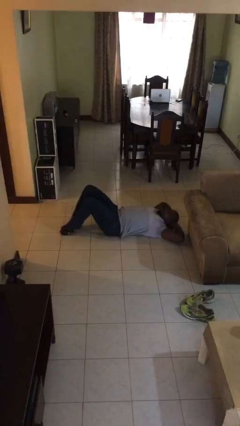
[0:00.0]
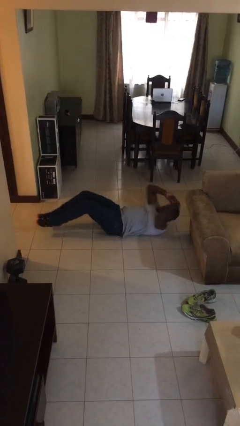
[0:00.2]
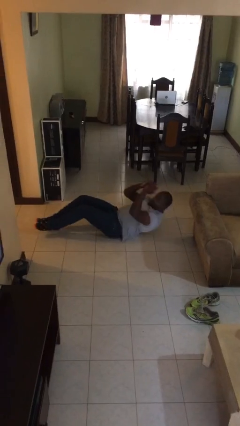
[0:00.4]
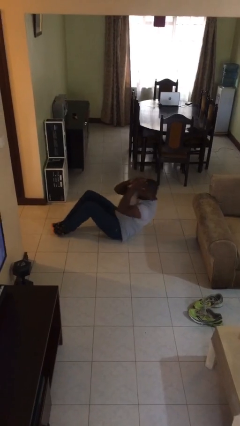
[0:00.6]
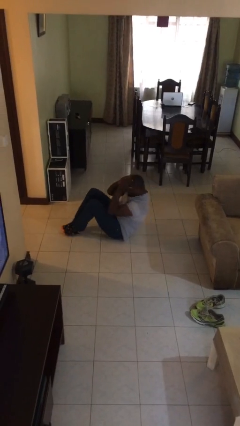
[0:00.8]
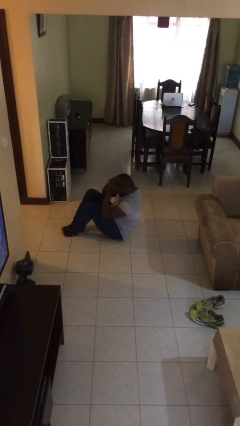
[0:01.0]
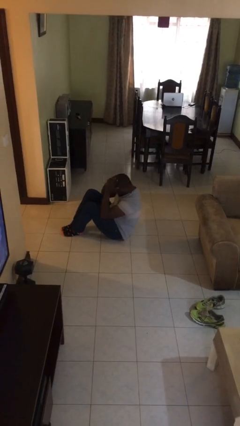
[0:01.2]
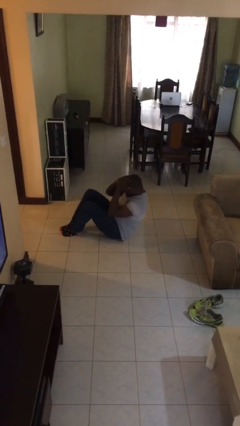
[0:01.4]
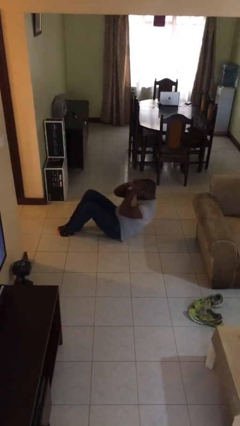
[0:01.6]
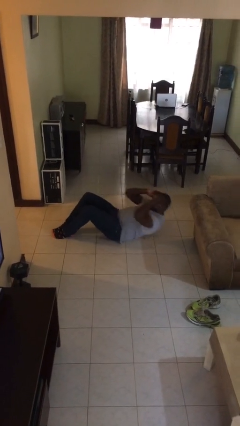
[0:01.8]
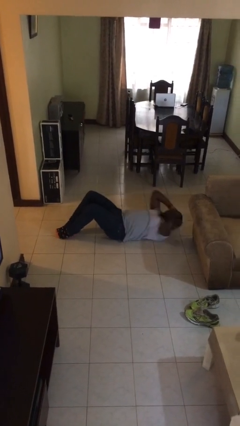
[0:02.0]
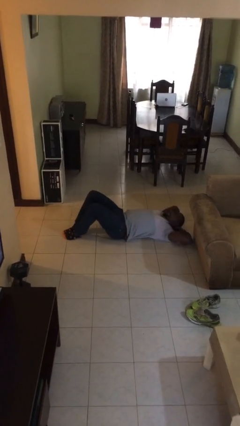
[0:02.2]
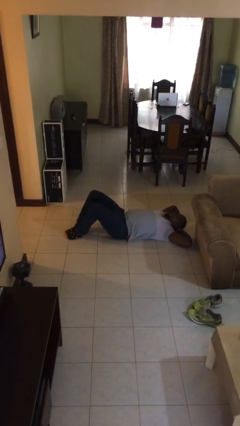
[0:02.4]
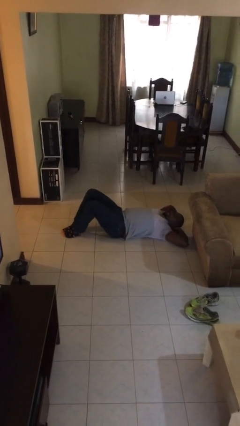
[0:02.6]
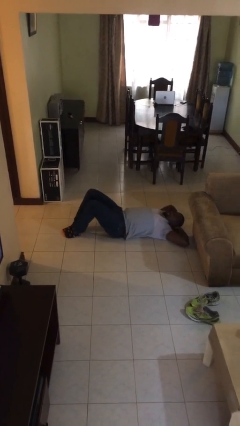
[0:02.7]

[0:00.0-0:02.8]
person exercises with situp

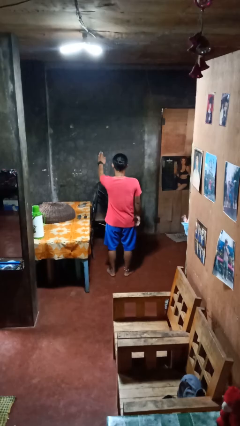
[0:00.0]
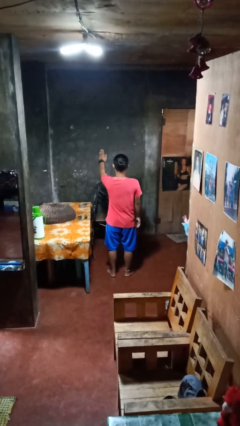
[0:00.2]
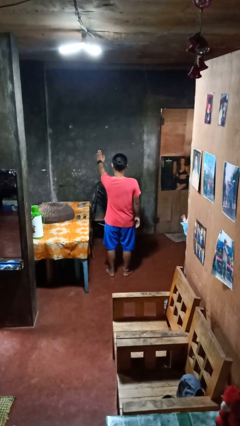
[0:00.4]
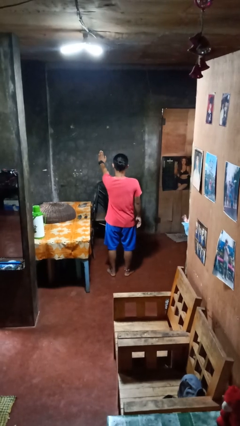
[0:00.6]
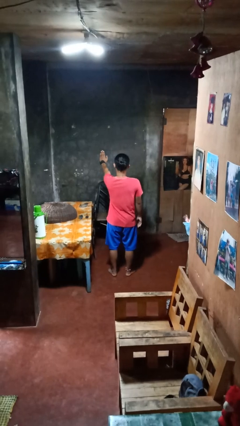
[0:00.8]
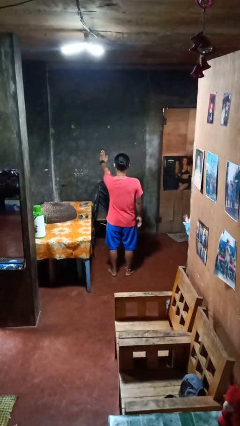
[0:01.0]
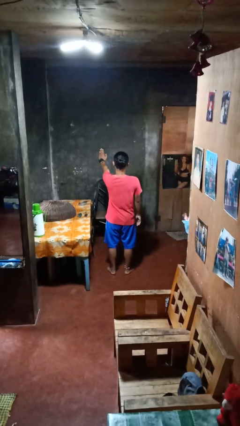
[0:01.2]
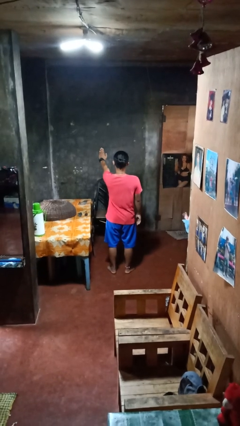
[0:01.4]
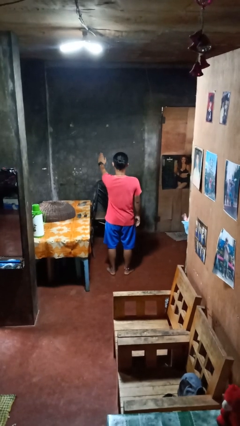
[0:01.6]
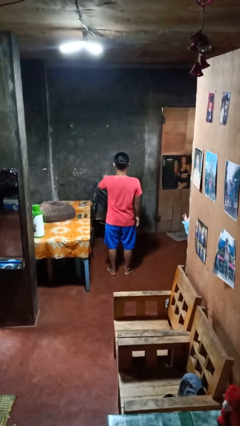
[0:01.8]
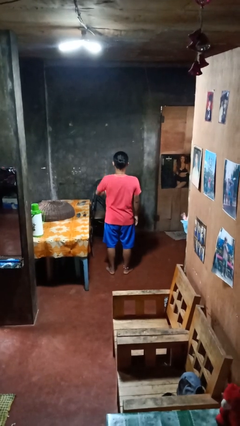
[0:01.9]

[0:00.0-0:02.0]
person gestures stop

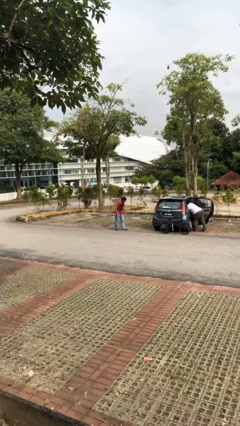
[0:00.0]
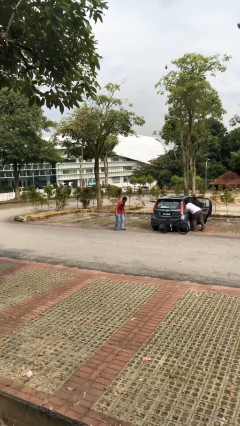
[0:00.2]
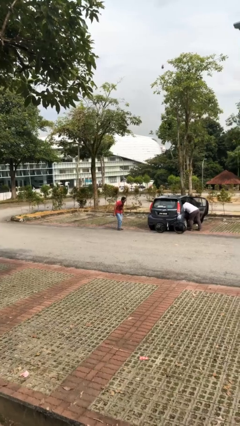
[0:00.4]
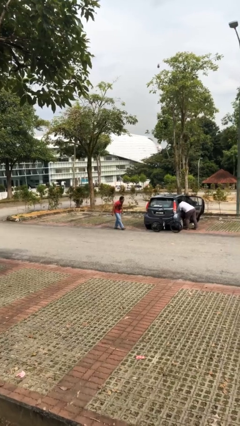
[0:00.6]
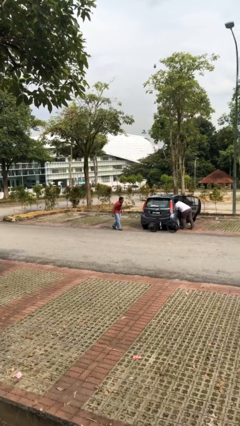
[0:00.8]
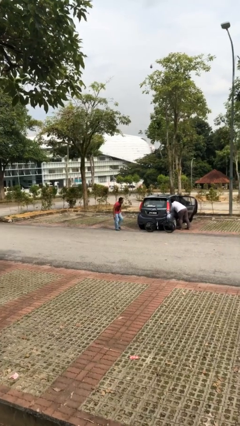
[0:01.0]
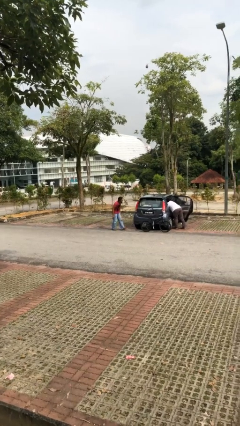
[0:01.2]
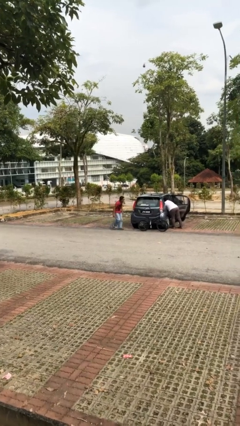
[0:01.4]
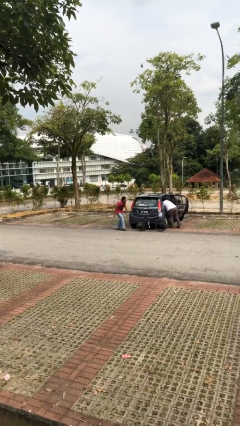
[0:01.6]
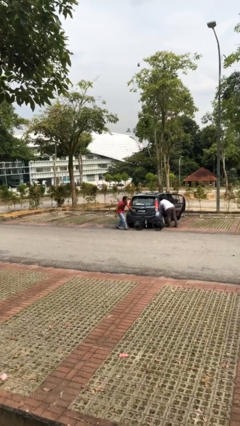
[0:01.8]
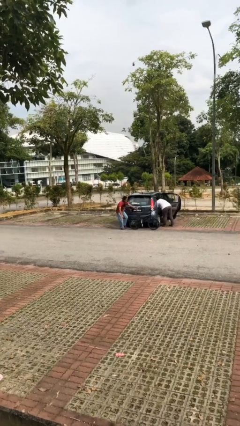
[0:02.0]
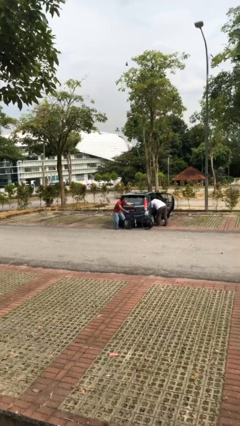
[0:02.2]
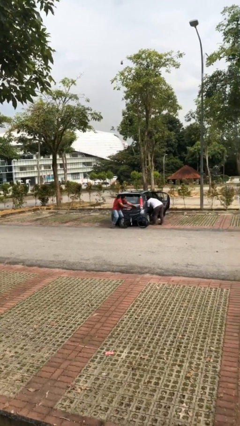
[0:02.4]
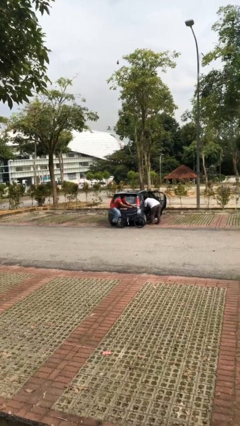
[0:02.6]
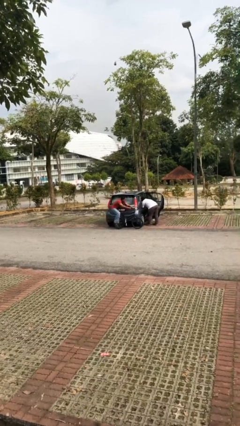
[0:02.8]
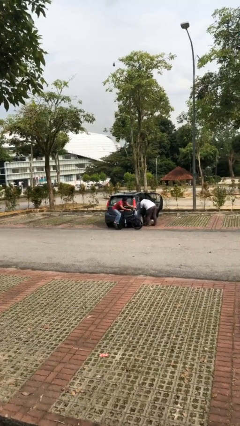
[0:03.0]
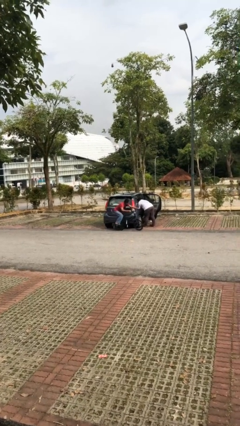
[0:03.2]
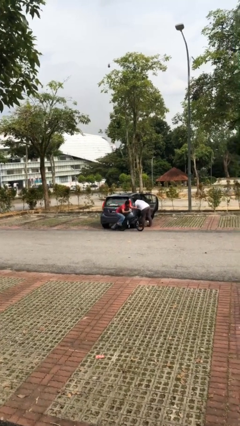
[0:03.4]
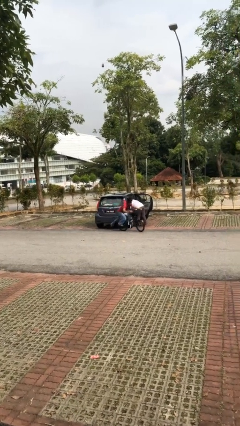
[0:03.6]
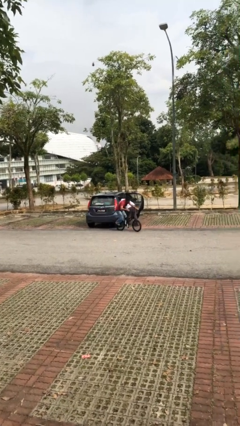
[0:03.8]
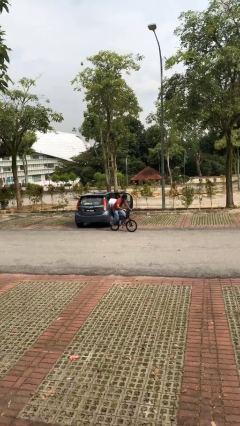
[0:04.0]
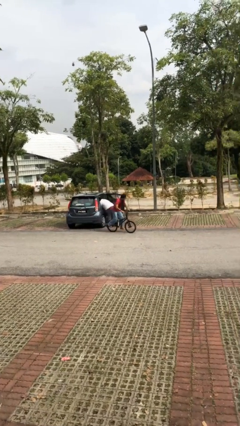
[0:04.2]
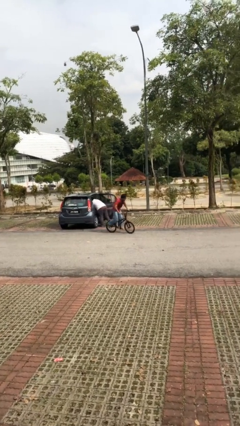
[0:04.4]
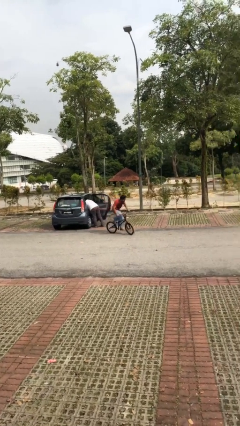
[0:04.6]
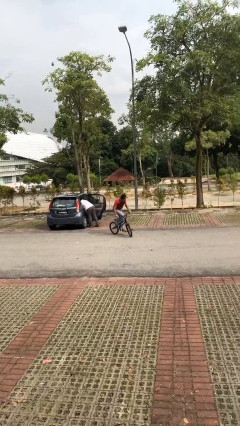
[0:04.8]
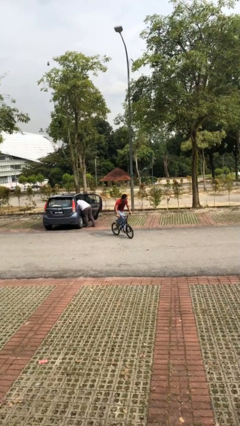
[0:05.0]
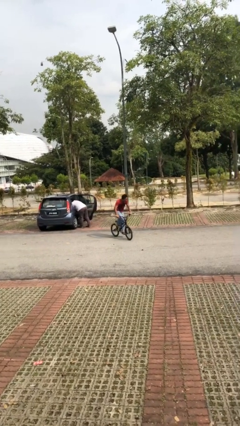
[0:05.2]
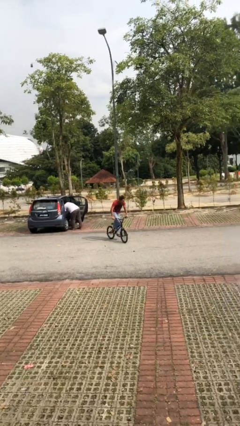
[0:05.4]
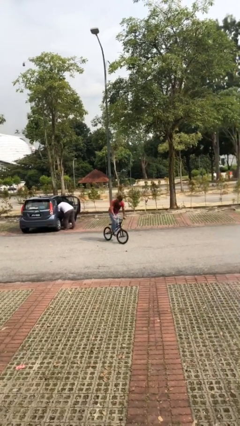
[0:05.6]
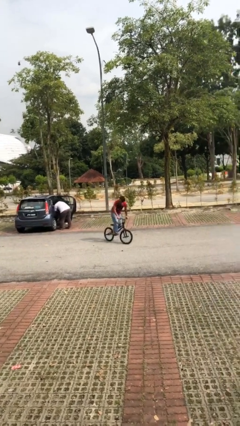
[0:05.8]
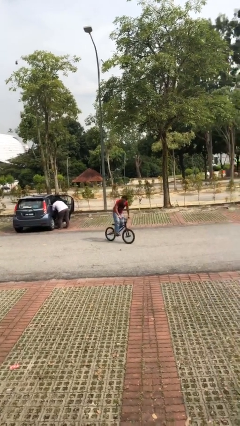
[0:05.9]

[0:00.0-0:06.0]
person steals object from person

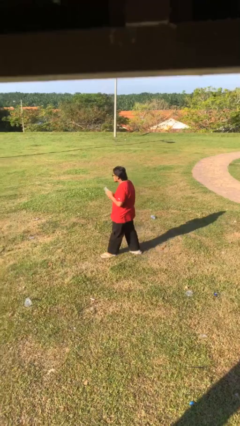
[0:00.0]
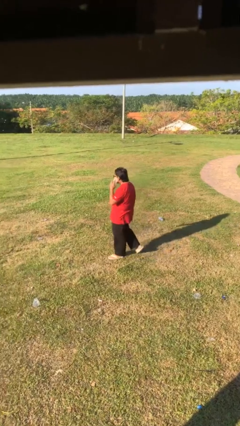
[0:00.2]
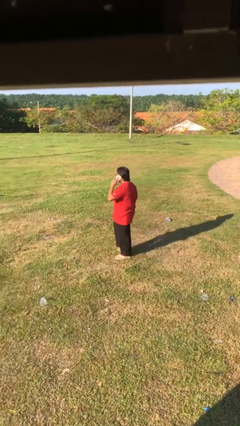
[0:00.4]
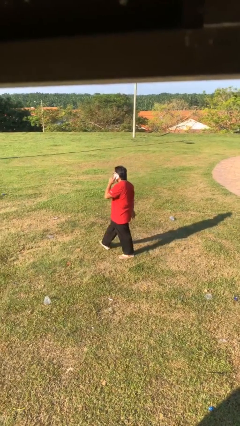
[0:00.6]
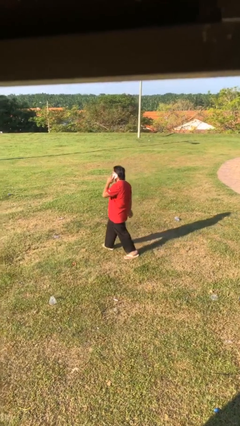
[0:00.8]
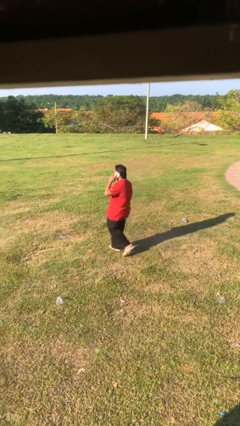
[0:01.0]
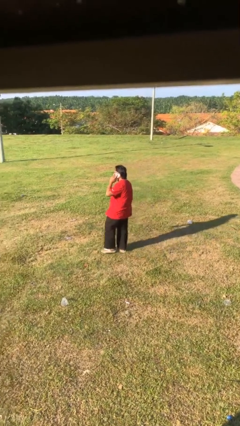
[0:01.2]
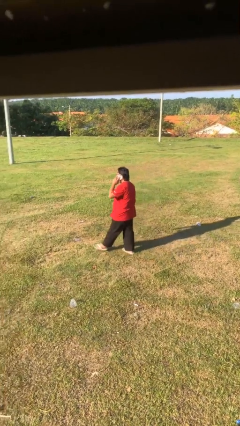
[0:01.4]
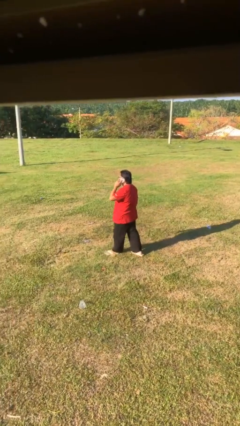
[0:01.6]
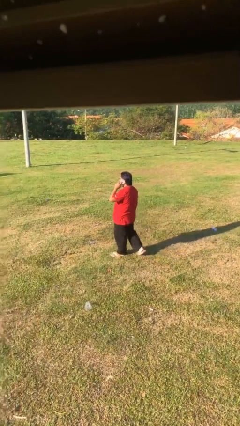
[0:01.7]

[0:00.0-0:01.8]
person talks on phone

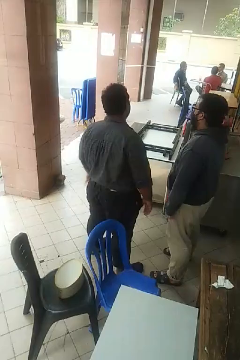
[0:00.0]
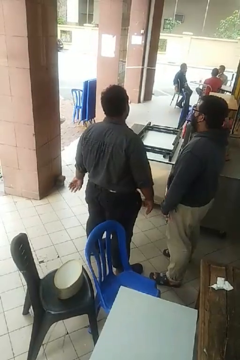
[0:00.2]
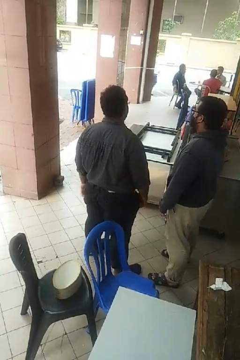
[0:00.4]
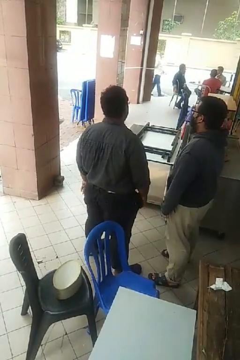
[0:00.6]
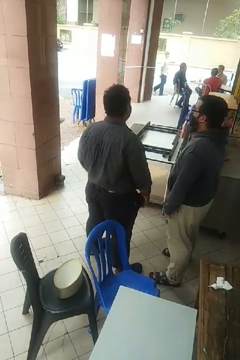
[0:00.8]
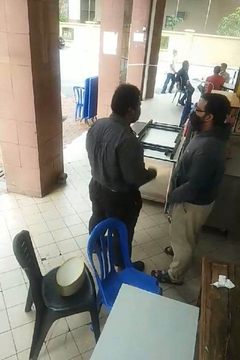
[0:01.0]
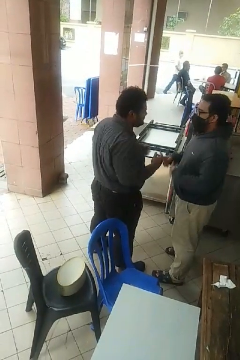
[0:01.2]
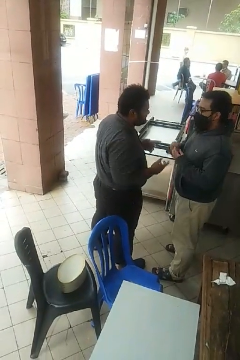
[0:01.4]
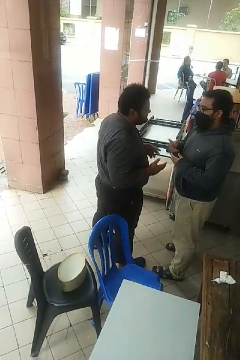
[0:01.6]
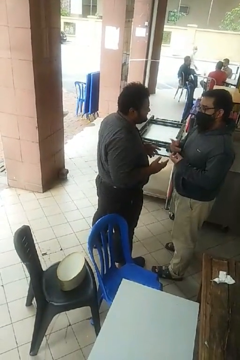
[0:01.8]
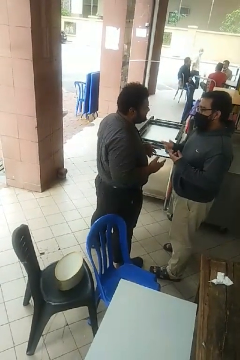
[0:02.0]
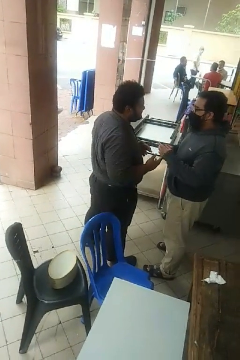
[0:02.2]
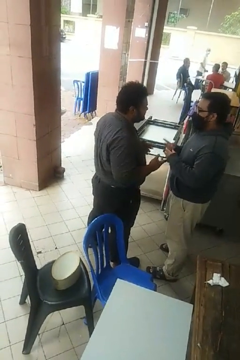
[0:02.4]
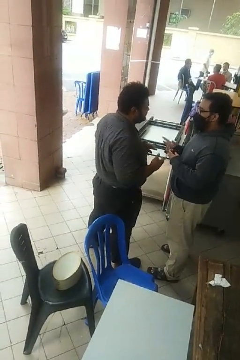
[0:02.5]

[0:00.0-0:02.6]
person talks to person

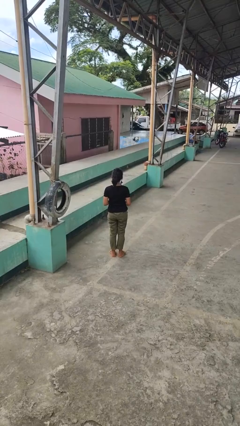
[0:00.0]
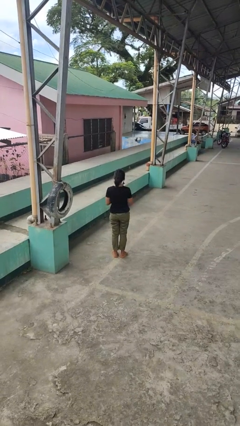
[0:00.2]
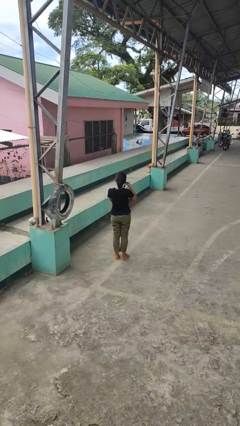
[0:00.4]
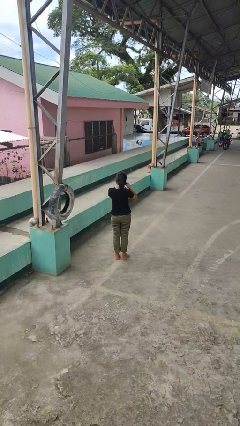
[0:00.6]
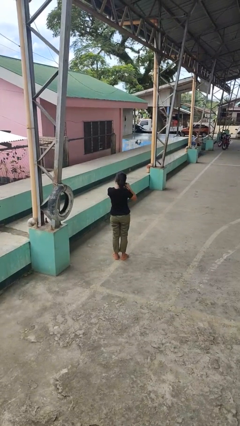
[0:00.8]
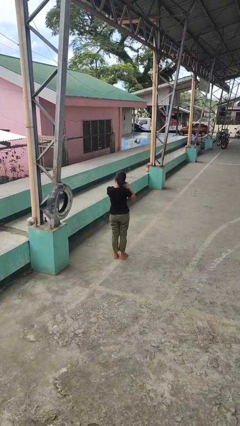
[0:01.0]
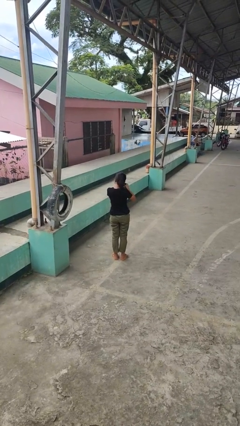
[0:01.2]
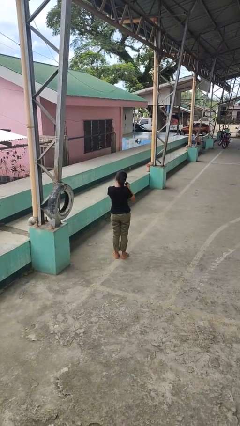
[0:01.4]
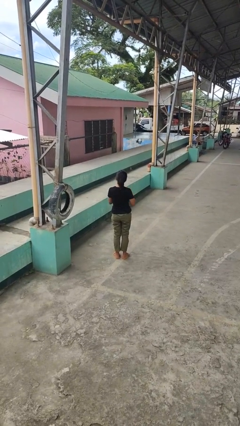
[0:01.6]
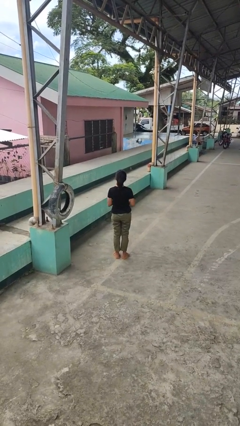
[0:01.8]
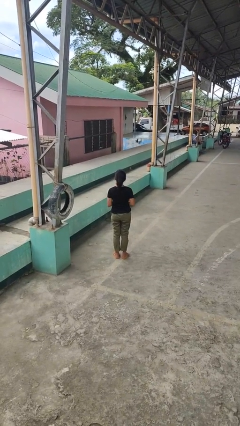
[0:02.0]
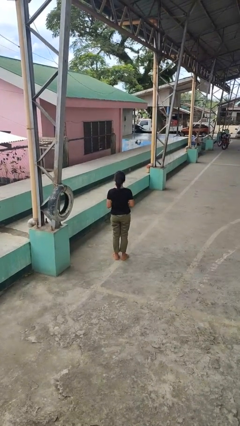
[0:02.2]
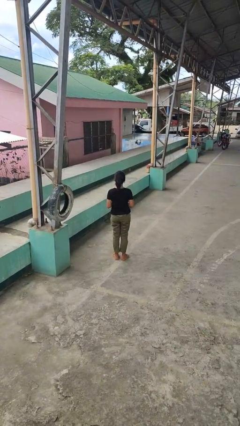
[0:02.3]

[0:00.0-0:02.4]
person takes off earrings
